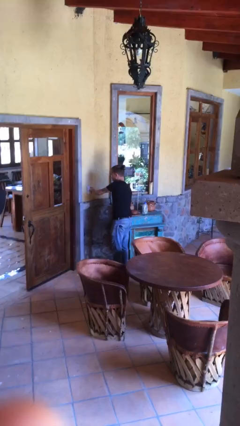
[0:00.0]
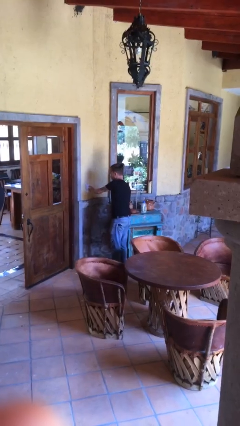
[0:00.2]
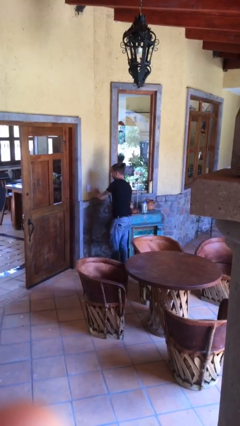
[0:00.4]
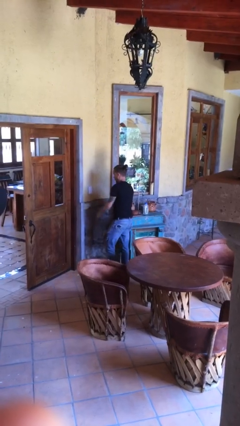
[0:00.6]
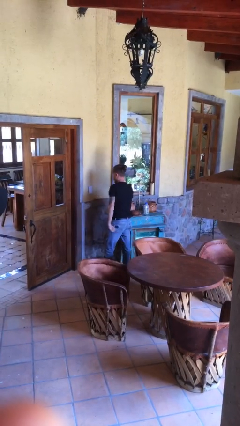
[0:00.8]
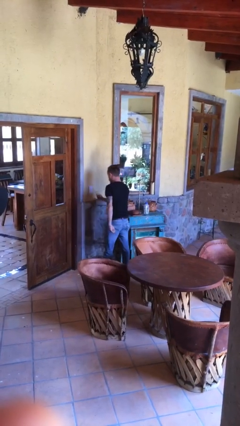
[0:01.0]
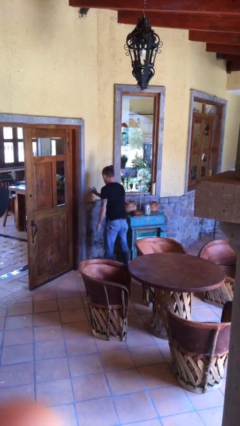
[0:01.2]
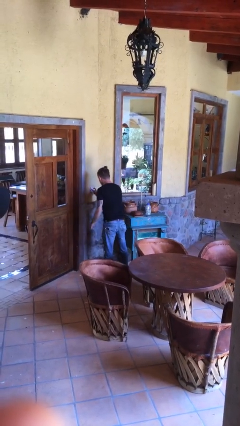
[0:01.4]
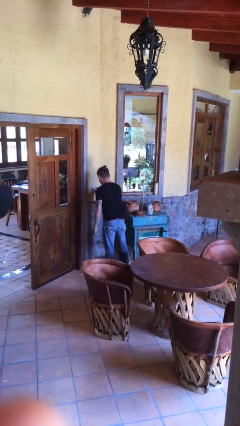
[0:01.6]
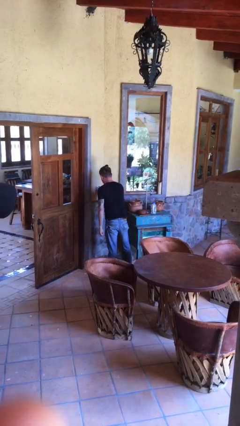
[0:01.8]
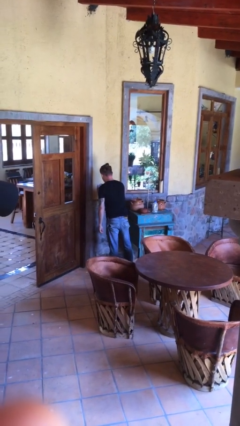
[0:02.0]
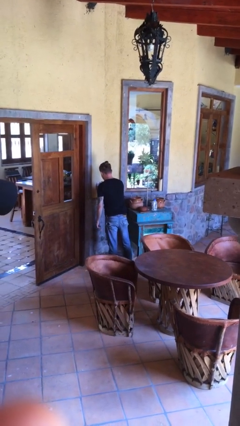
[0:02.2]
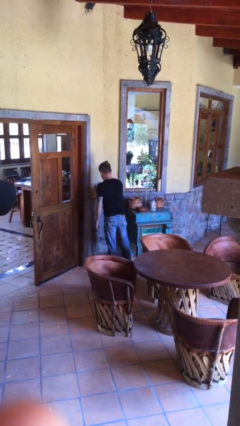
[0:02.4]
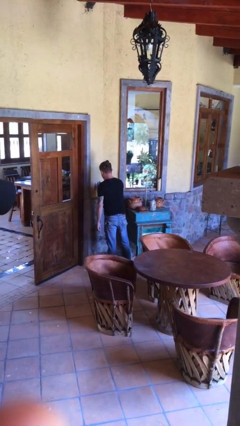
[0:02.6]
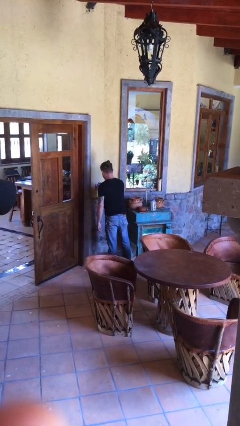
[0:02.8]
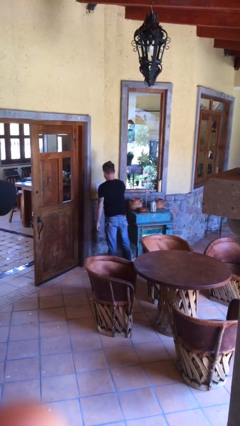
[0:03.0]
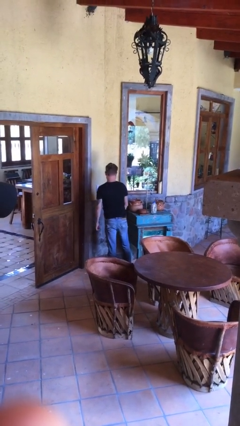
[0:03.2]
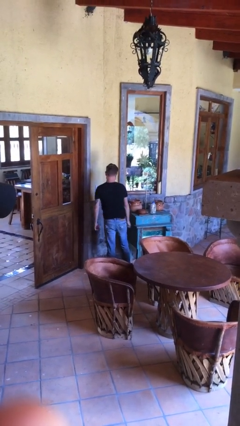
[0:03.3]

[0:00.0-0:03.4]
person adjusts thermostat

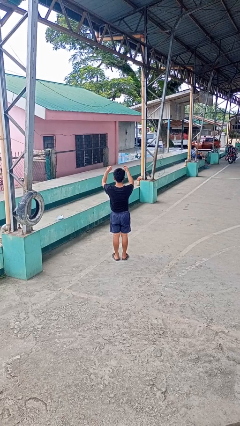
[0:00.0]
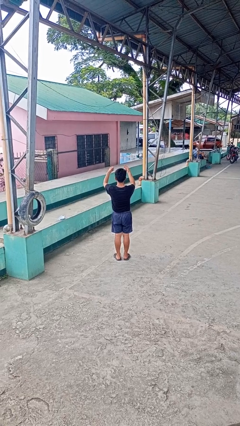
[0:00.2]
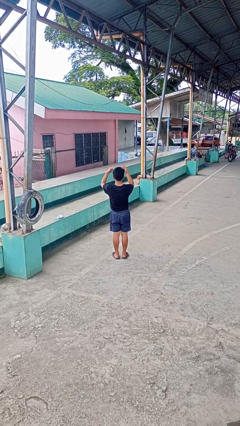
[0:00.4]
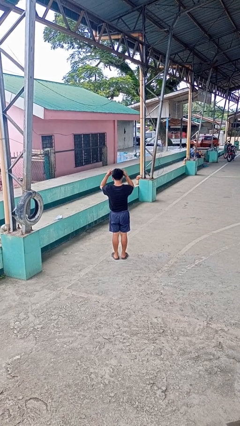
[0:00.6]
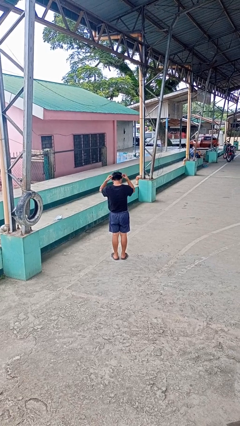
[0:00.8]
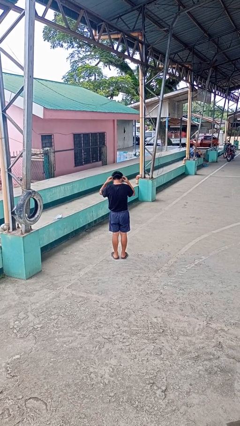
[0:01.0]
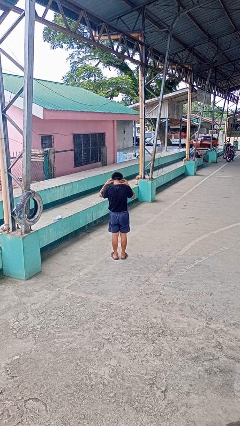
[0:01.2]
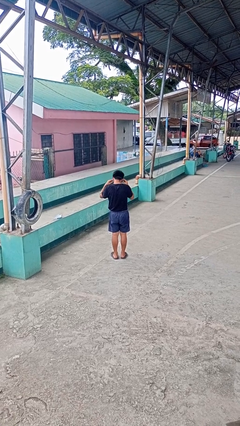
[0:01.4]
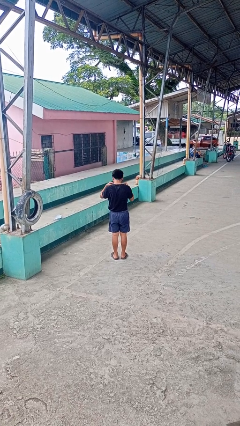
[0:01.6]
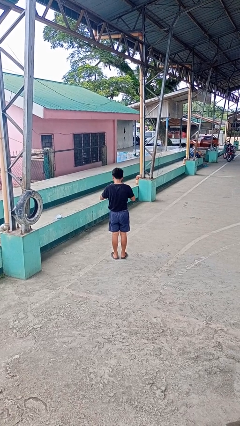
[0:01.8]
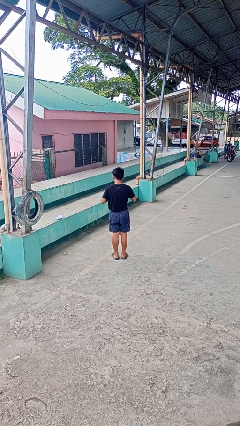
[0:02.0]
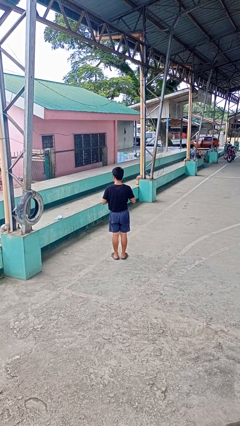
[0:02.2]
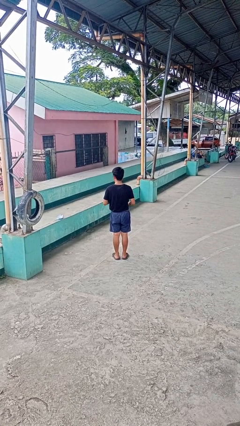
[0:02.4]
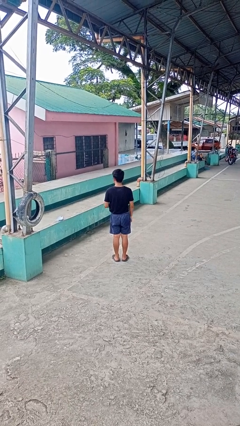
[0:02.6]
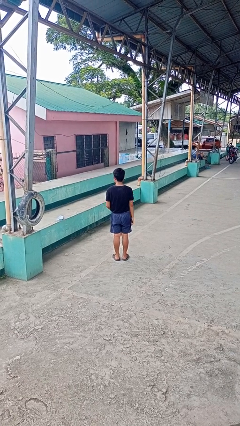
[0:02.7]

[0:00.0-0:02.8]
person puts on necklace

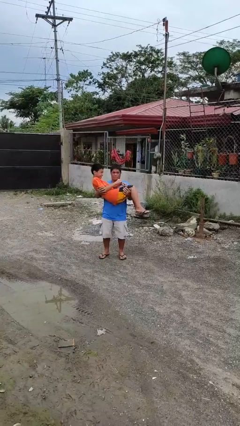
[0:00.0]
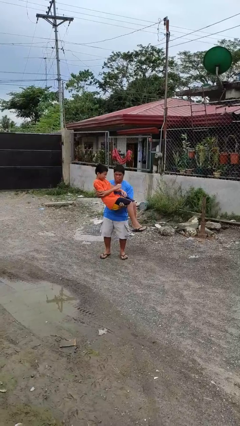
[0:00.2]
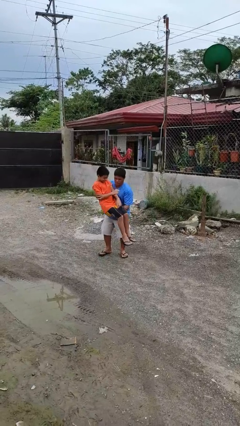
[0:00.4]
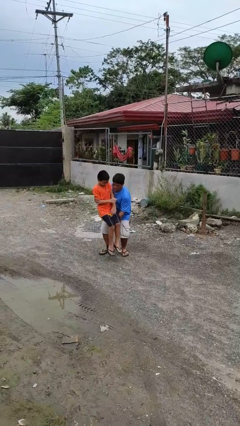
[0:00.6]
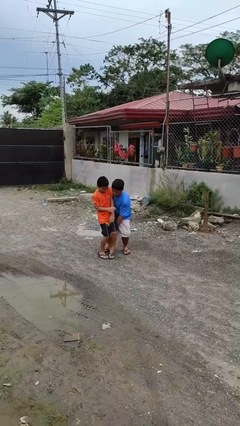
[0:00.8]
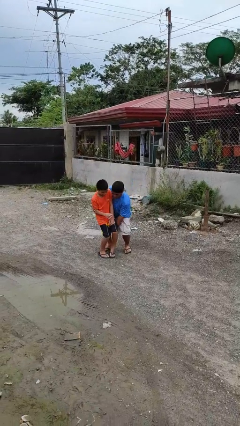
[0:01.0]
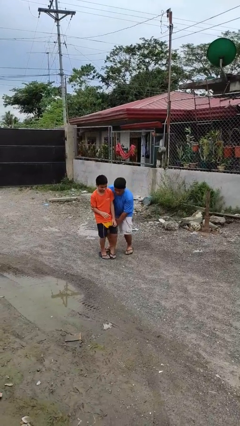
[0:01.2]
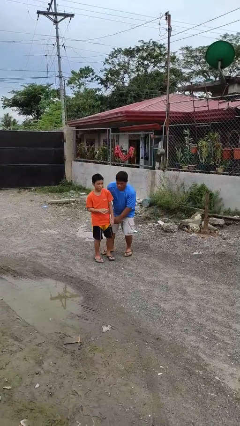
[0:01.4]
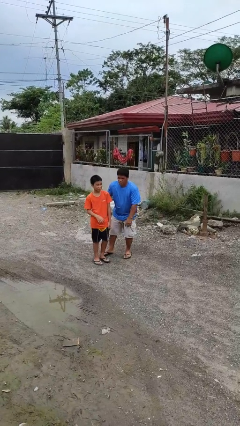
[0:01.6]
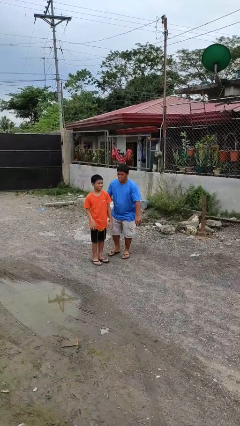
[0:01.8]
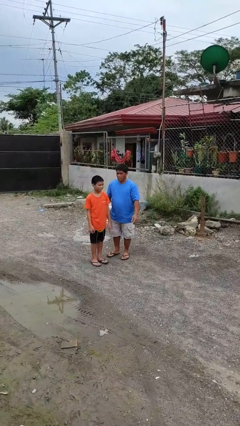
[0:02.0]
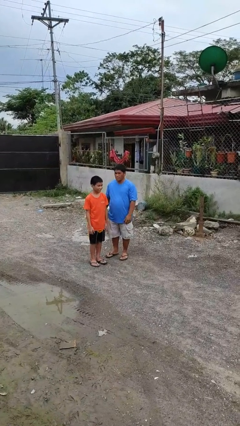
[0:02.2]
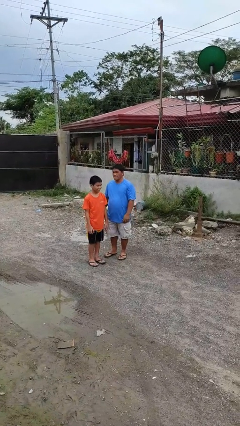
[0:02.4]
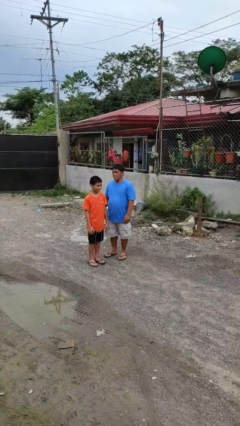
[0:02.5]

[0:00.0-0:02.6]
person puts down person

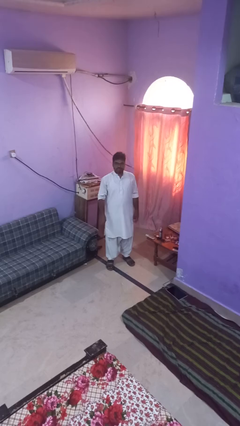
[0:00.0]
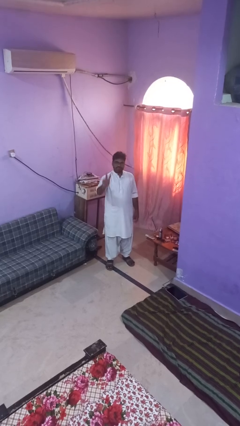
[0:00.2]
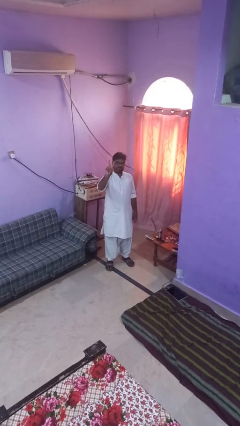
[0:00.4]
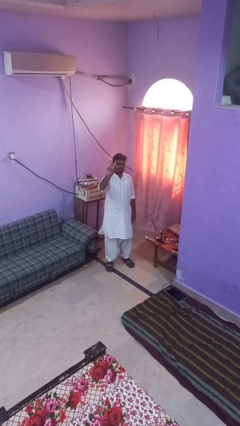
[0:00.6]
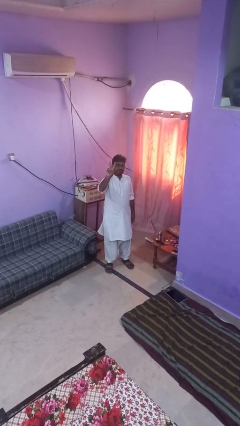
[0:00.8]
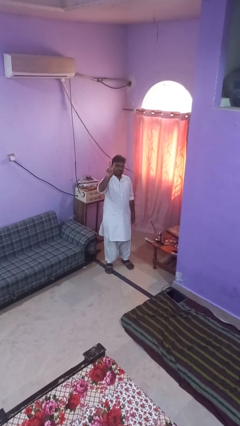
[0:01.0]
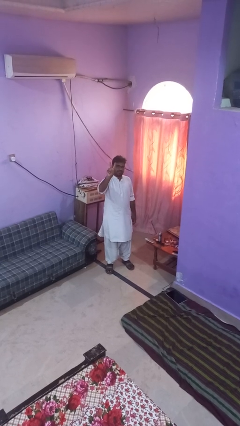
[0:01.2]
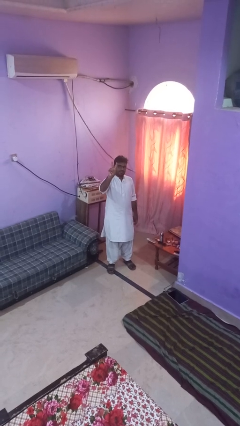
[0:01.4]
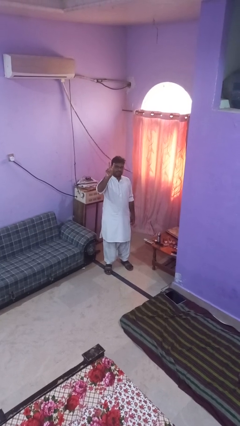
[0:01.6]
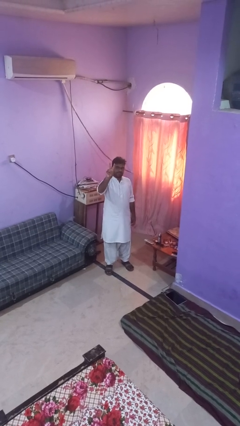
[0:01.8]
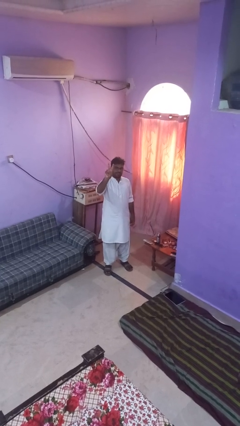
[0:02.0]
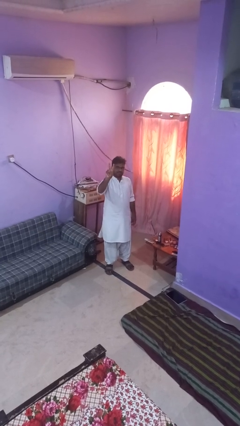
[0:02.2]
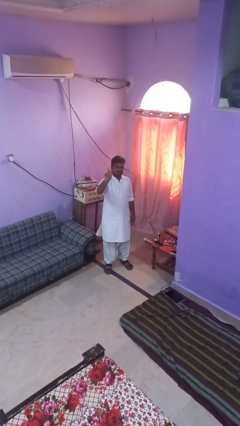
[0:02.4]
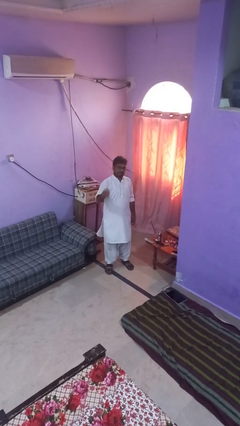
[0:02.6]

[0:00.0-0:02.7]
person gestures peace

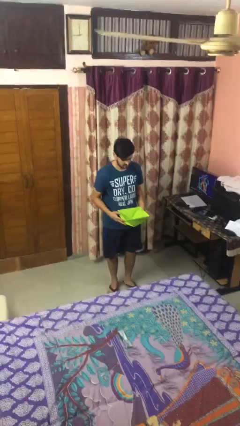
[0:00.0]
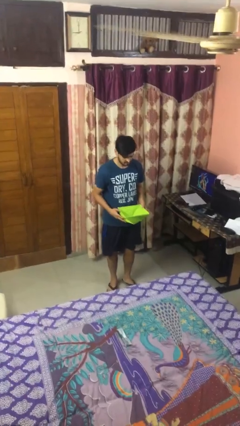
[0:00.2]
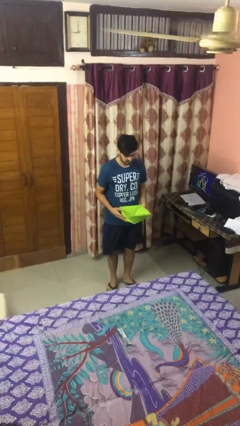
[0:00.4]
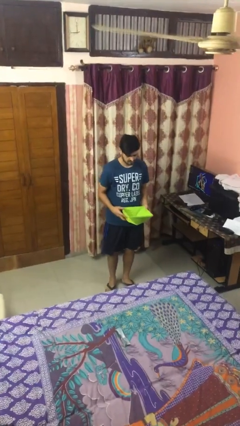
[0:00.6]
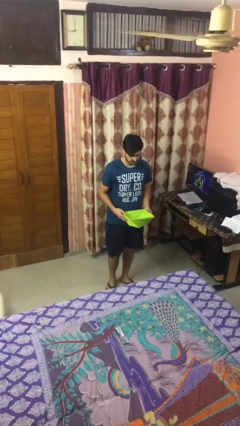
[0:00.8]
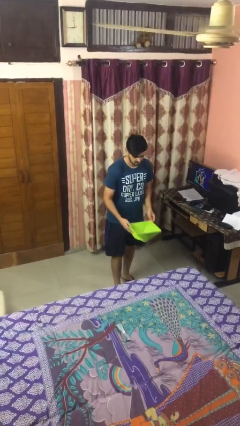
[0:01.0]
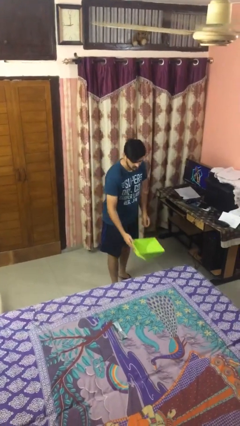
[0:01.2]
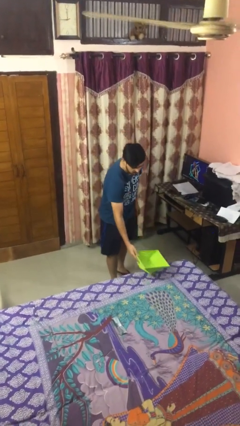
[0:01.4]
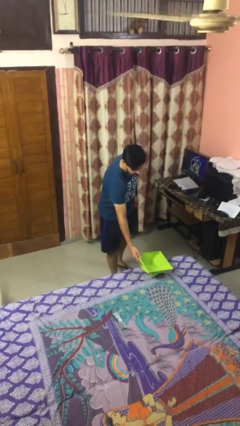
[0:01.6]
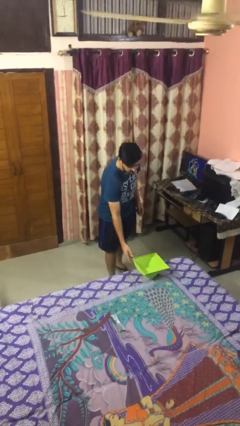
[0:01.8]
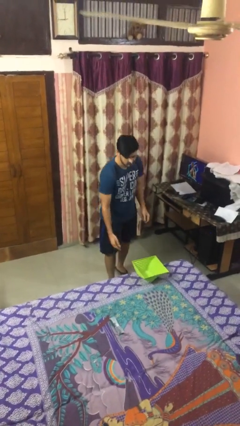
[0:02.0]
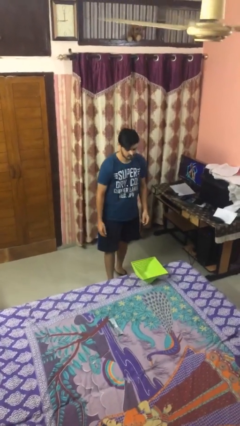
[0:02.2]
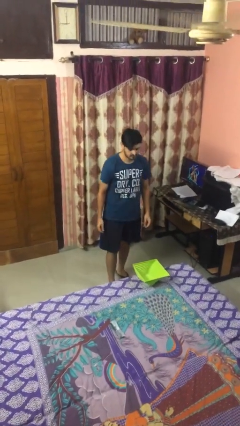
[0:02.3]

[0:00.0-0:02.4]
person puts down object on bed

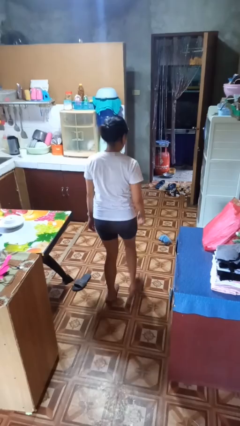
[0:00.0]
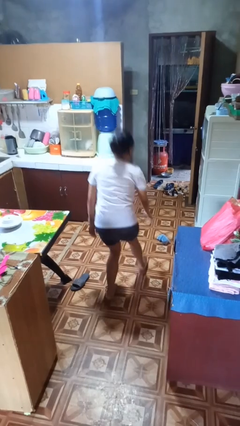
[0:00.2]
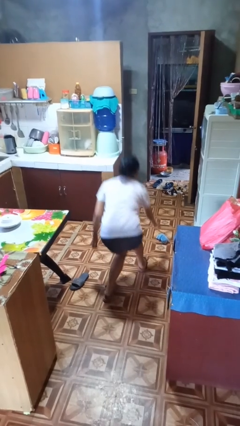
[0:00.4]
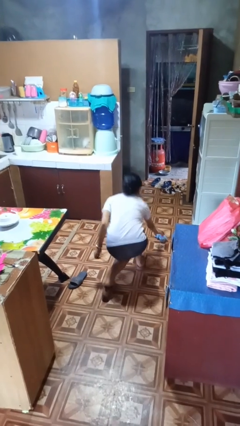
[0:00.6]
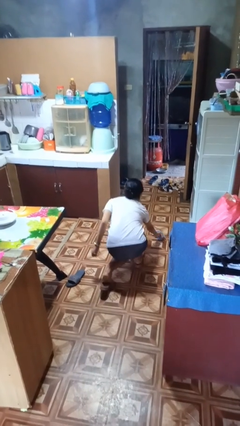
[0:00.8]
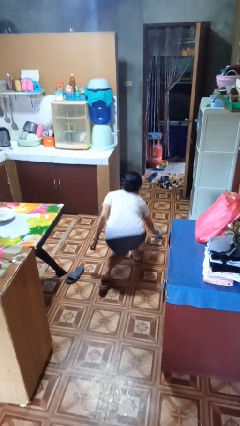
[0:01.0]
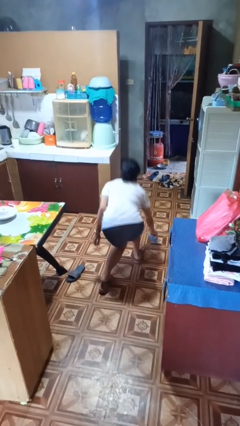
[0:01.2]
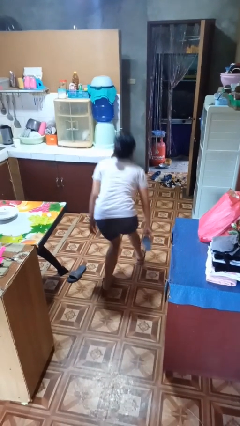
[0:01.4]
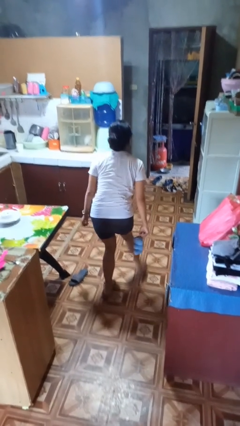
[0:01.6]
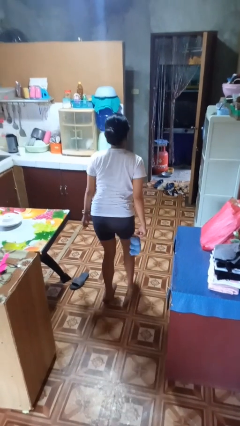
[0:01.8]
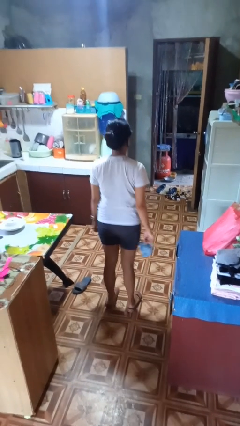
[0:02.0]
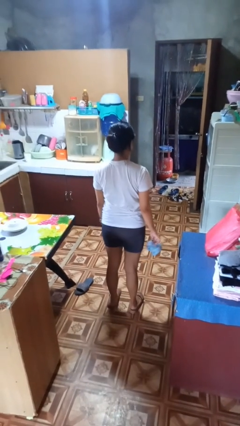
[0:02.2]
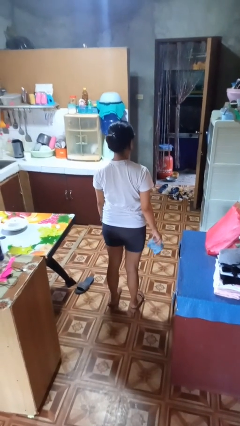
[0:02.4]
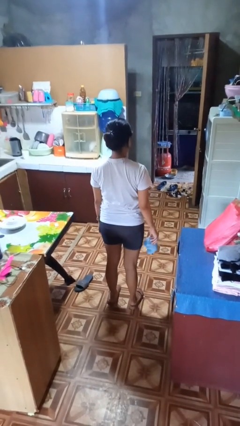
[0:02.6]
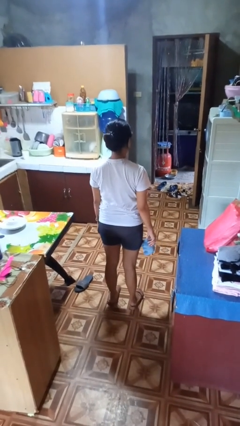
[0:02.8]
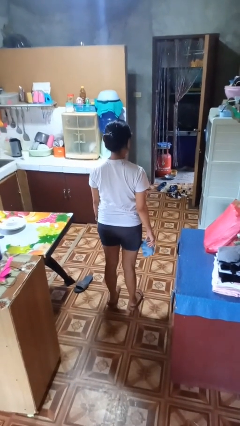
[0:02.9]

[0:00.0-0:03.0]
person picks up object from floor
